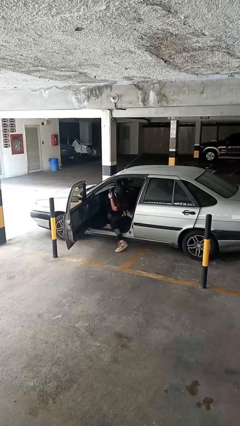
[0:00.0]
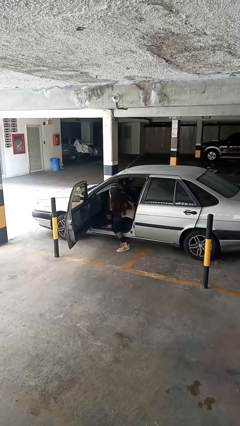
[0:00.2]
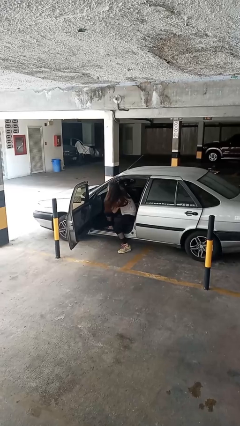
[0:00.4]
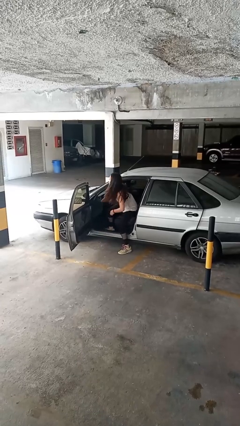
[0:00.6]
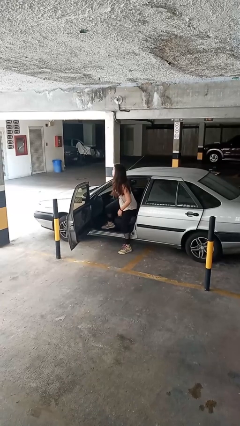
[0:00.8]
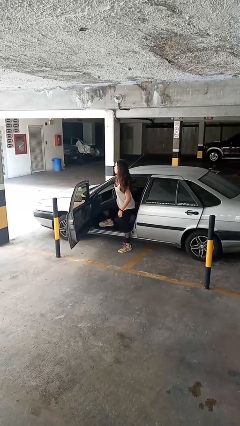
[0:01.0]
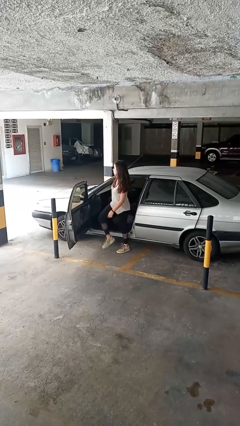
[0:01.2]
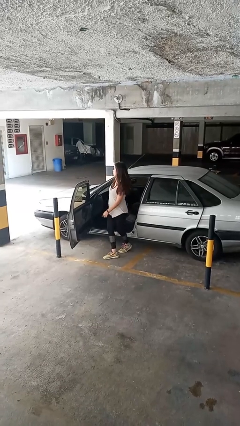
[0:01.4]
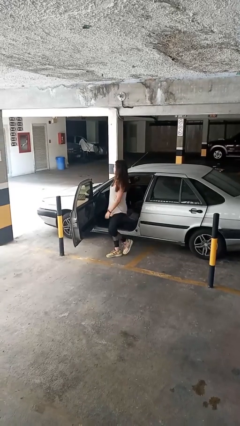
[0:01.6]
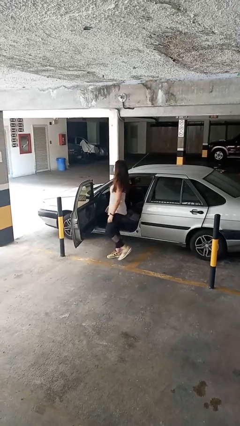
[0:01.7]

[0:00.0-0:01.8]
person exits car

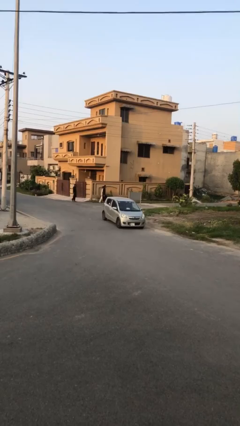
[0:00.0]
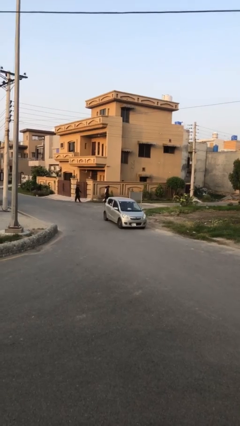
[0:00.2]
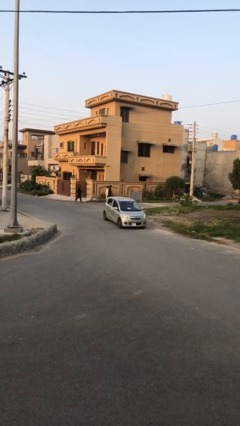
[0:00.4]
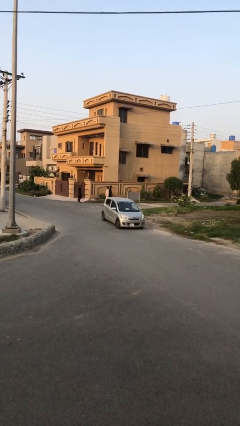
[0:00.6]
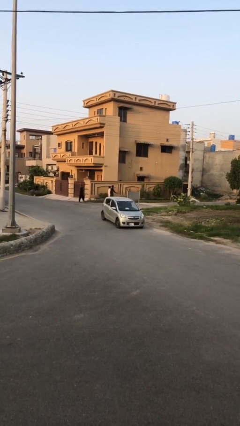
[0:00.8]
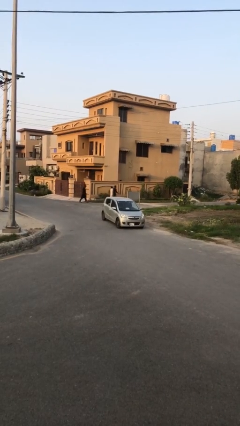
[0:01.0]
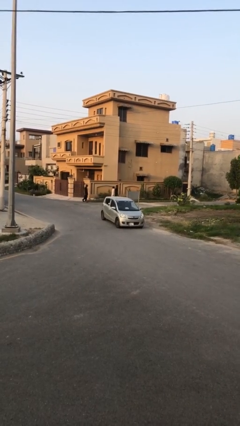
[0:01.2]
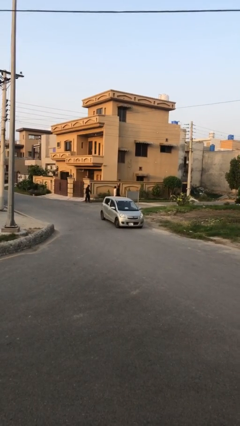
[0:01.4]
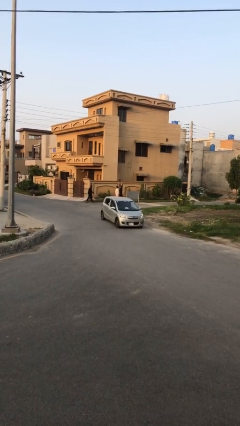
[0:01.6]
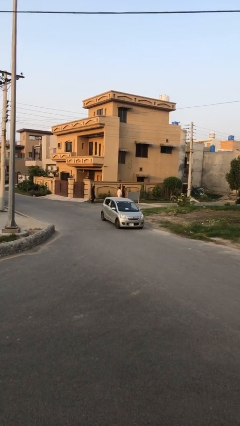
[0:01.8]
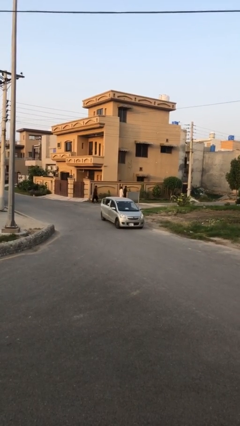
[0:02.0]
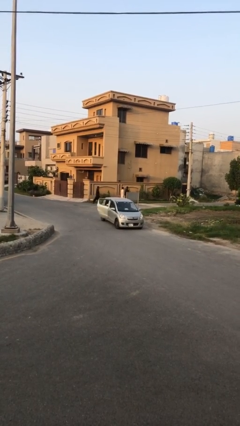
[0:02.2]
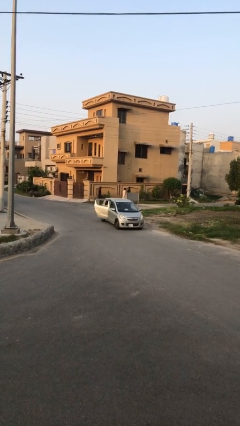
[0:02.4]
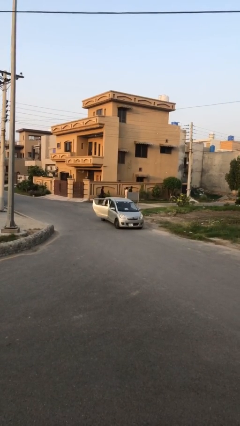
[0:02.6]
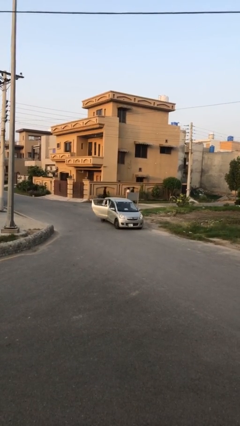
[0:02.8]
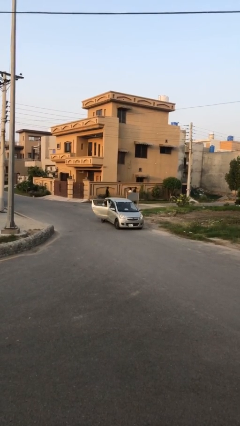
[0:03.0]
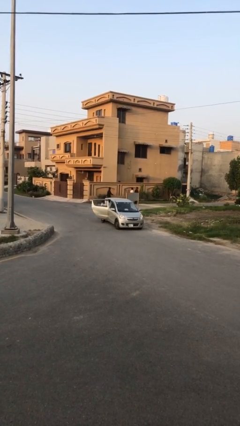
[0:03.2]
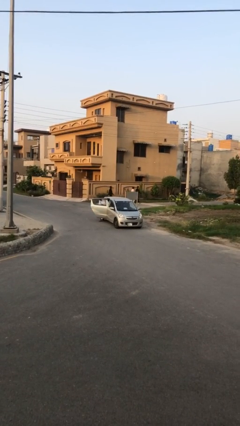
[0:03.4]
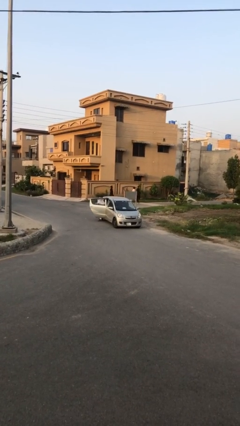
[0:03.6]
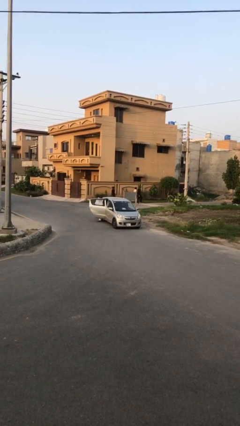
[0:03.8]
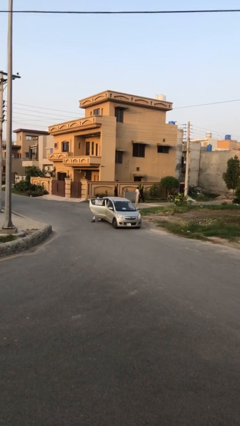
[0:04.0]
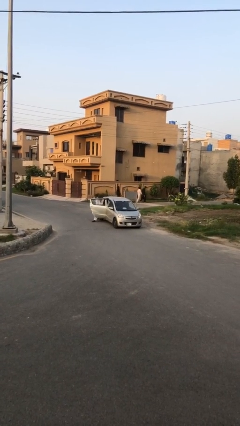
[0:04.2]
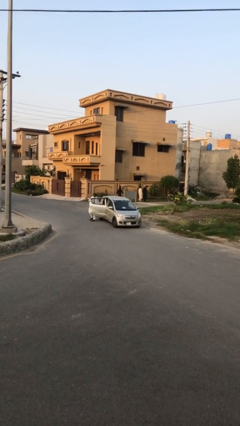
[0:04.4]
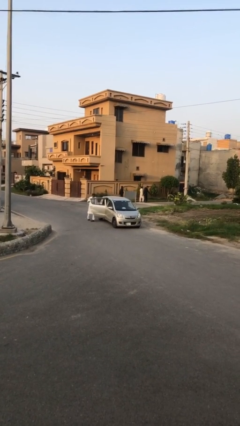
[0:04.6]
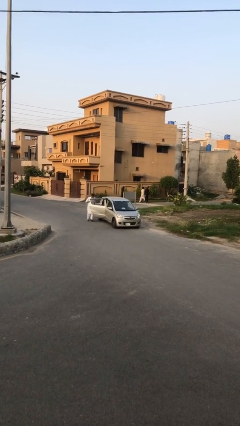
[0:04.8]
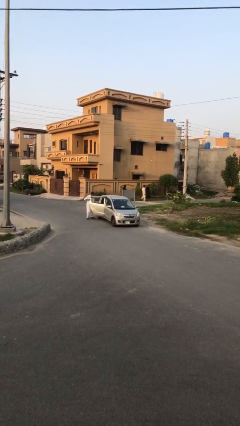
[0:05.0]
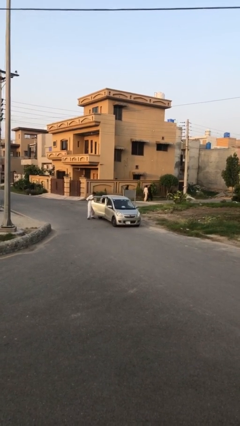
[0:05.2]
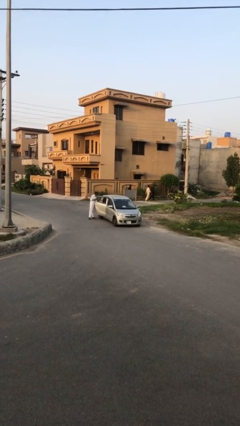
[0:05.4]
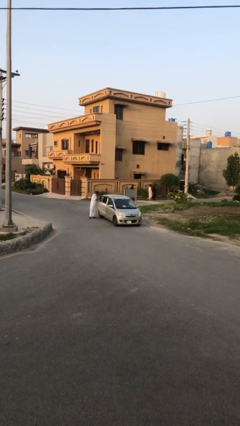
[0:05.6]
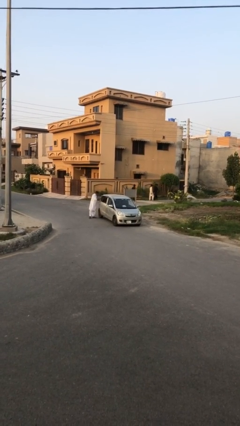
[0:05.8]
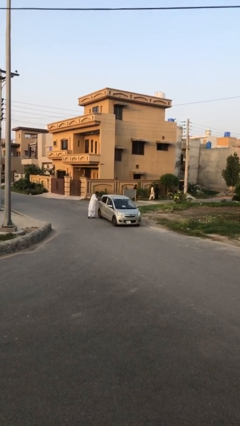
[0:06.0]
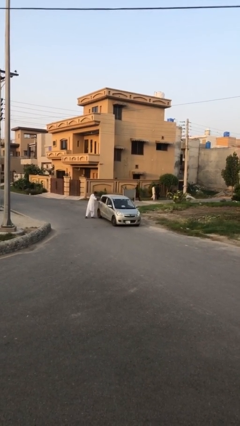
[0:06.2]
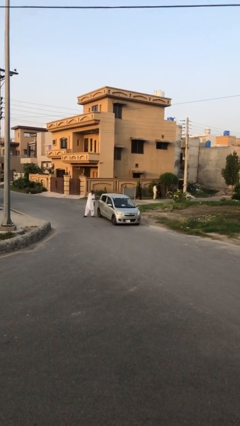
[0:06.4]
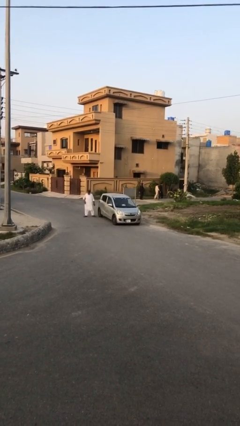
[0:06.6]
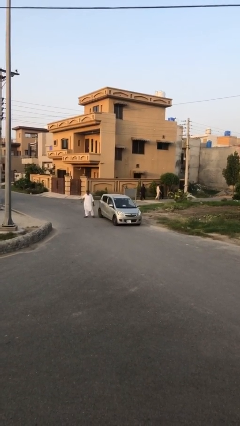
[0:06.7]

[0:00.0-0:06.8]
car drops off person

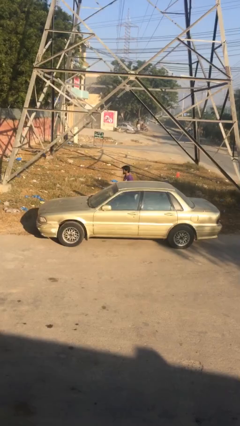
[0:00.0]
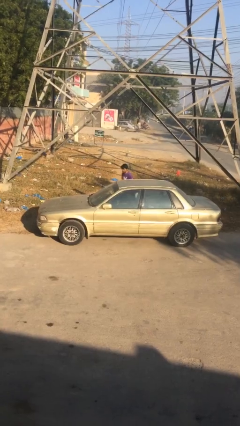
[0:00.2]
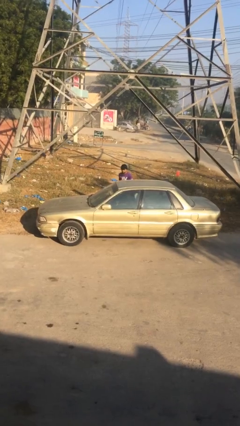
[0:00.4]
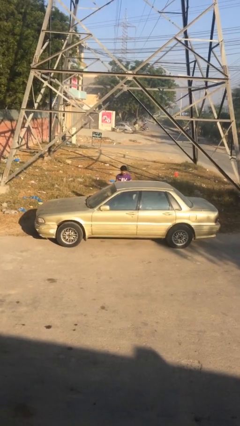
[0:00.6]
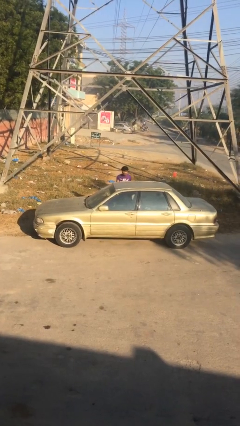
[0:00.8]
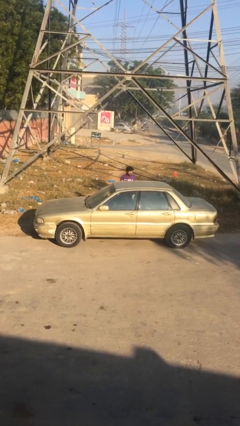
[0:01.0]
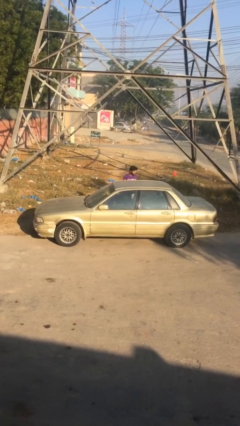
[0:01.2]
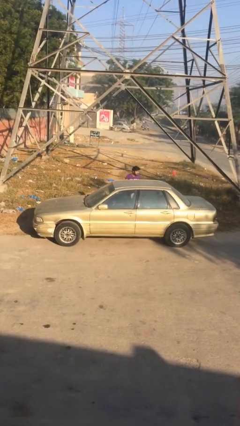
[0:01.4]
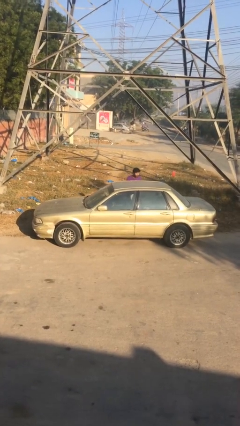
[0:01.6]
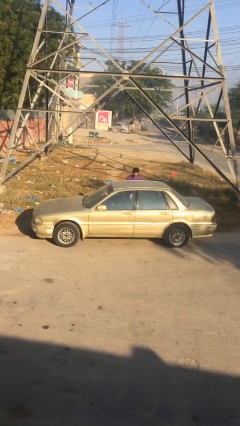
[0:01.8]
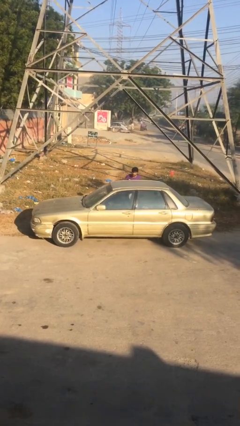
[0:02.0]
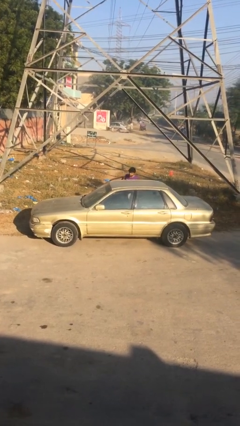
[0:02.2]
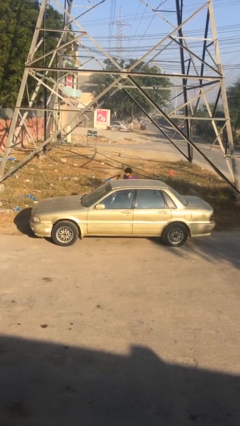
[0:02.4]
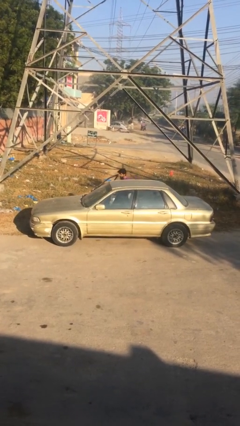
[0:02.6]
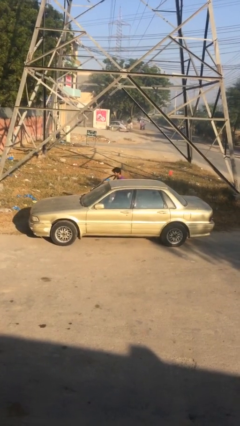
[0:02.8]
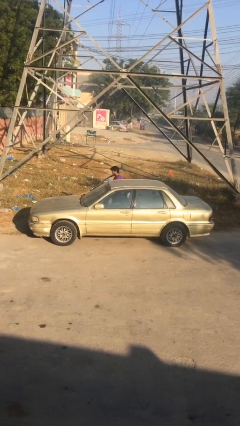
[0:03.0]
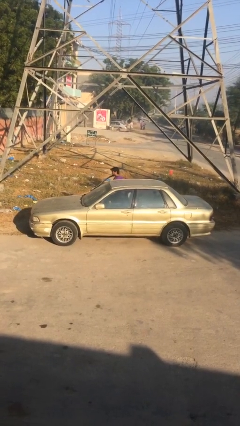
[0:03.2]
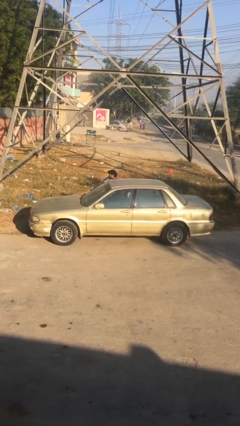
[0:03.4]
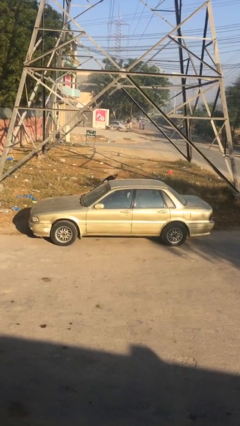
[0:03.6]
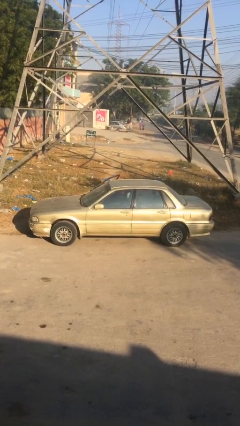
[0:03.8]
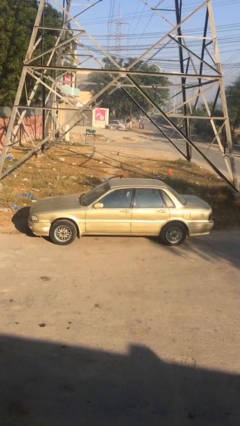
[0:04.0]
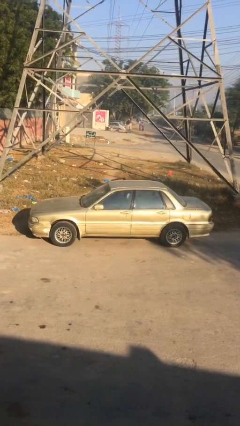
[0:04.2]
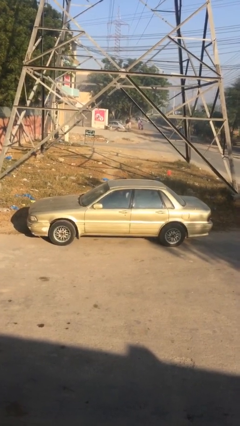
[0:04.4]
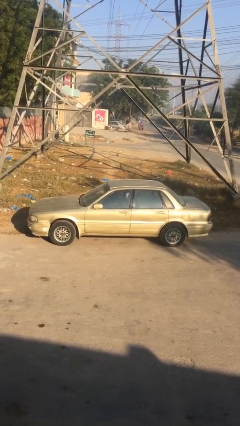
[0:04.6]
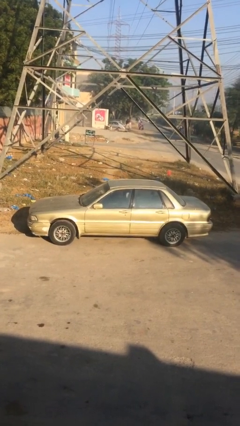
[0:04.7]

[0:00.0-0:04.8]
car picks up person

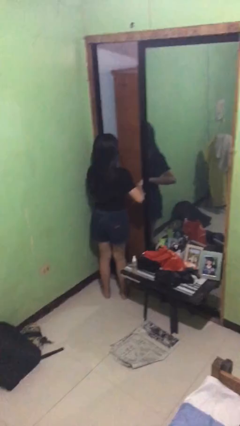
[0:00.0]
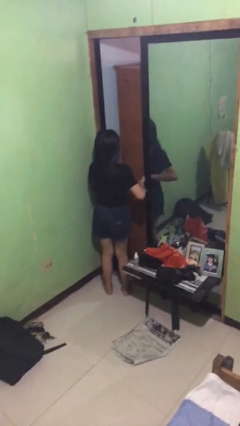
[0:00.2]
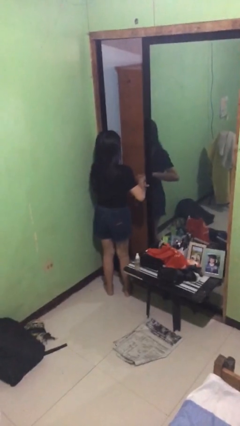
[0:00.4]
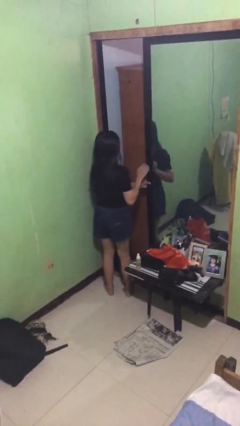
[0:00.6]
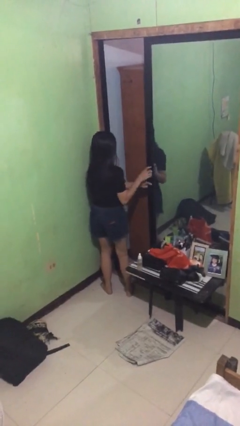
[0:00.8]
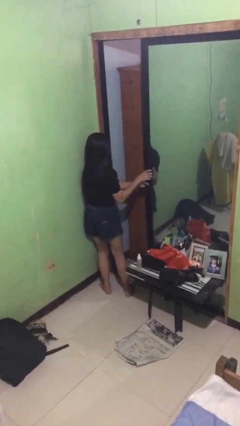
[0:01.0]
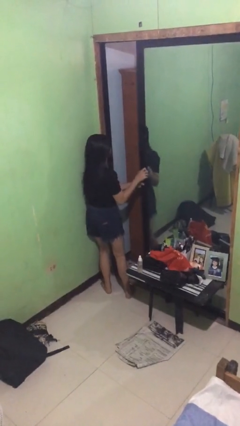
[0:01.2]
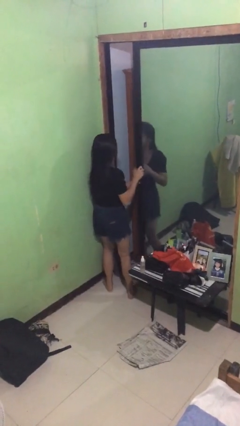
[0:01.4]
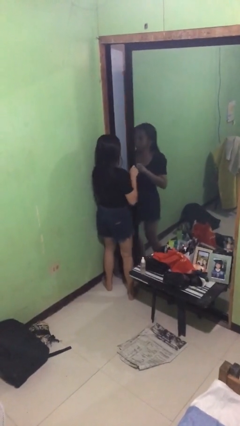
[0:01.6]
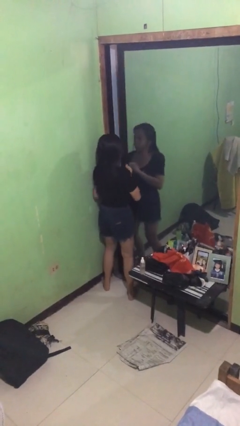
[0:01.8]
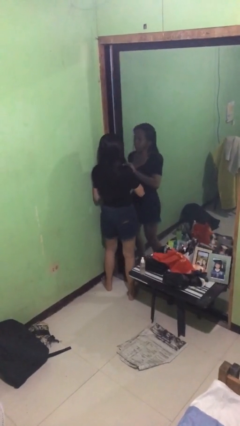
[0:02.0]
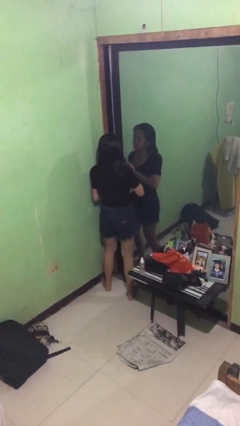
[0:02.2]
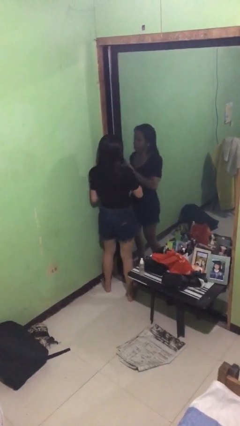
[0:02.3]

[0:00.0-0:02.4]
person closes sliding door

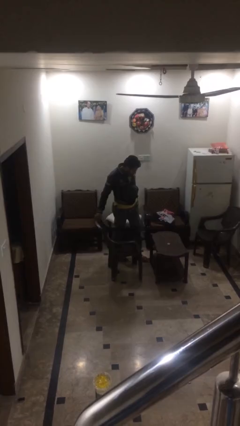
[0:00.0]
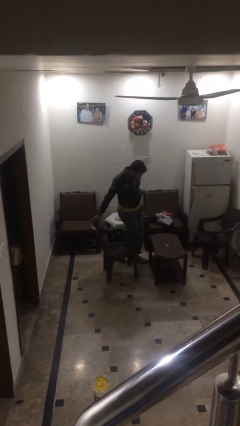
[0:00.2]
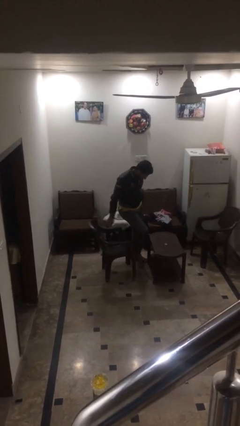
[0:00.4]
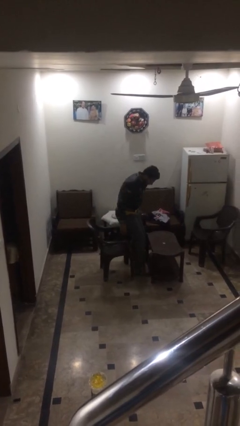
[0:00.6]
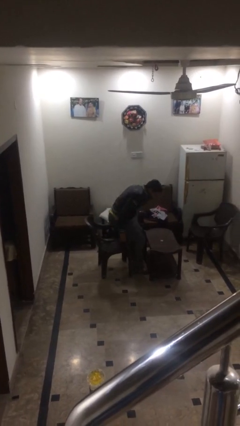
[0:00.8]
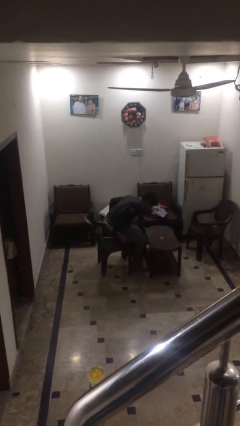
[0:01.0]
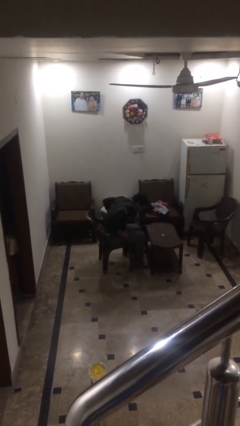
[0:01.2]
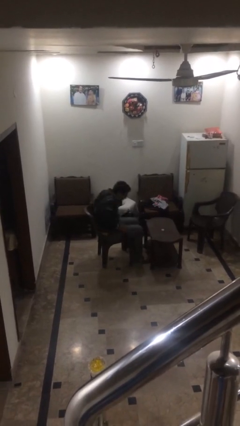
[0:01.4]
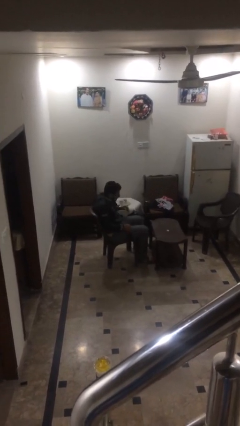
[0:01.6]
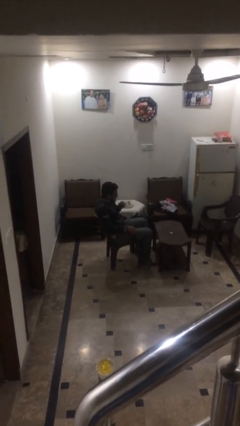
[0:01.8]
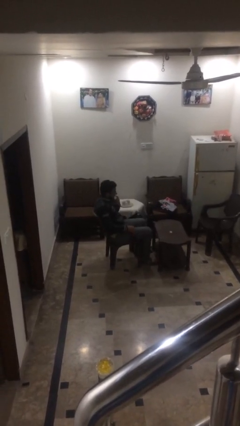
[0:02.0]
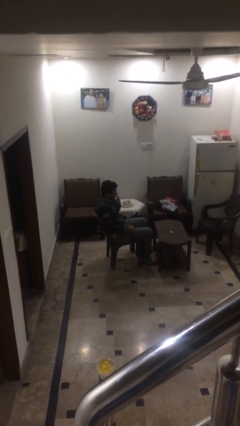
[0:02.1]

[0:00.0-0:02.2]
person sits down
